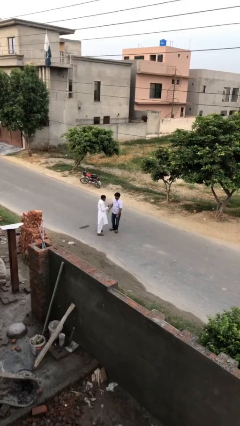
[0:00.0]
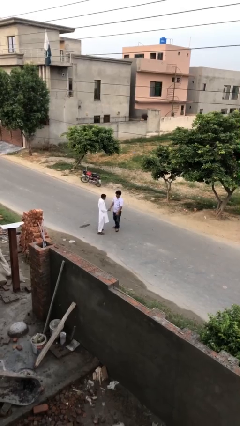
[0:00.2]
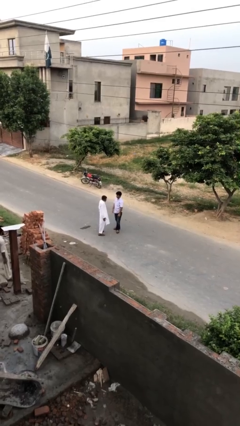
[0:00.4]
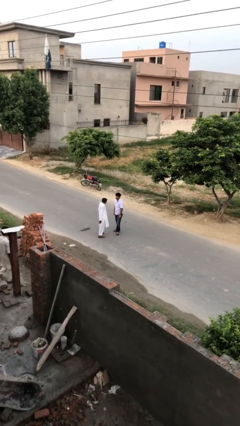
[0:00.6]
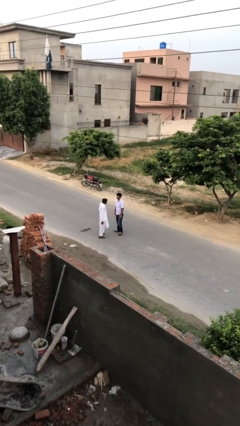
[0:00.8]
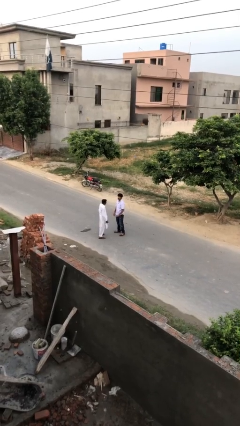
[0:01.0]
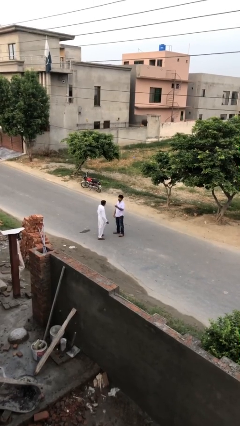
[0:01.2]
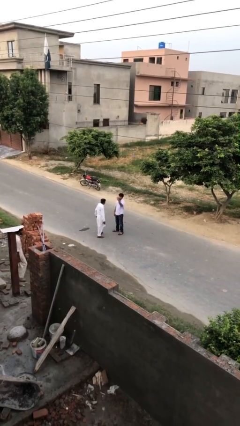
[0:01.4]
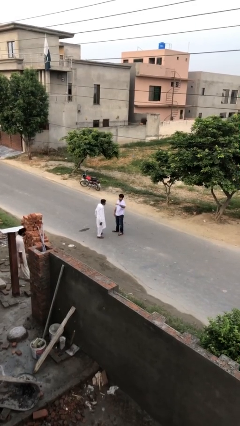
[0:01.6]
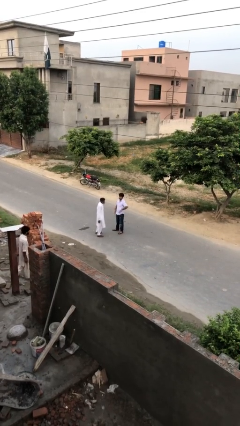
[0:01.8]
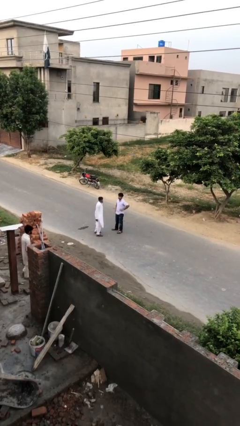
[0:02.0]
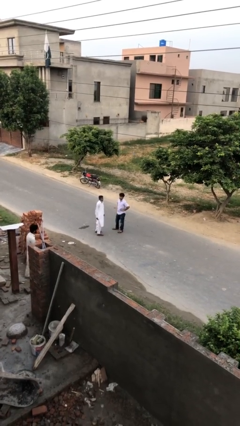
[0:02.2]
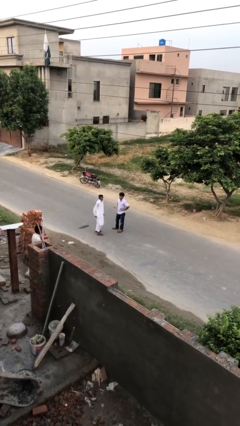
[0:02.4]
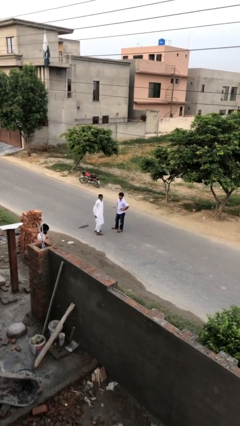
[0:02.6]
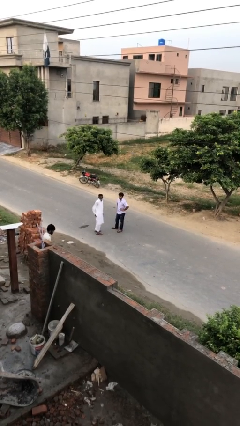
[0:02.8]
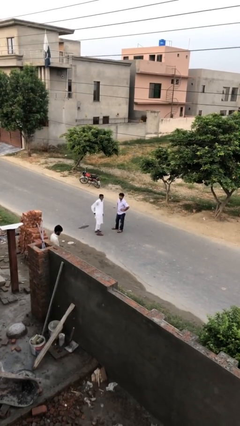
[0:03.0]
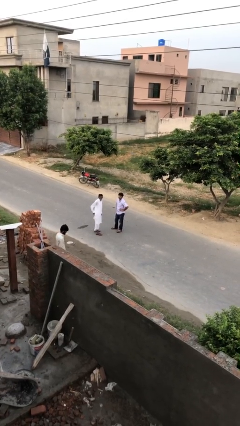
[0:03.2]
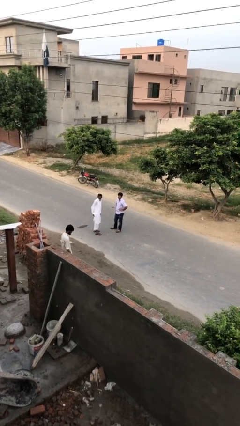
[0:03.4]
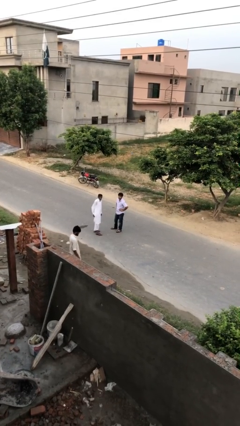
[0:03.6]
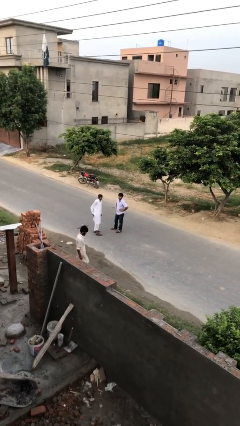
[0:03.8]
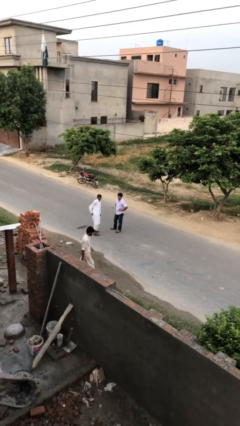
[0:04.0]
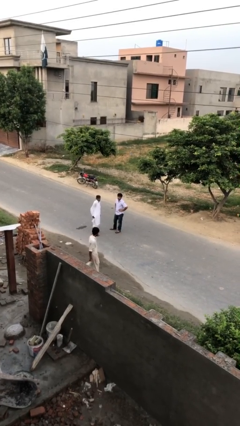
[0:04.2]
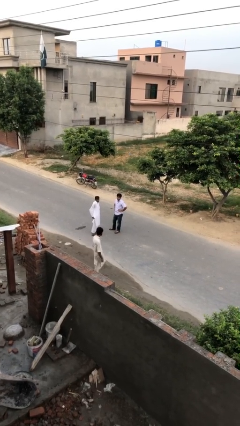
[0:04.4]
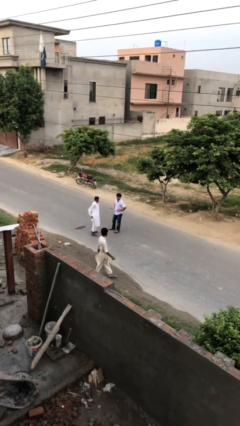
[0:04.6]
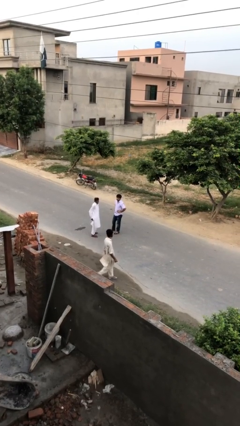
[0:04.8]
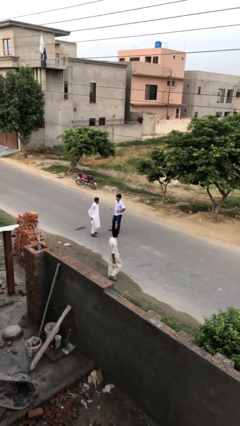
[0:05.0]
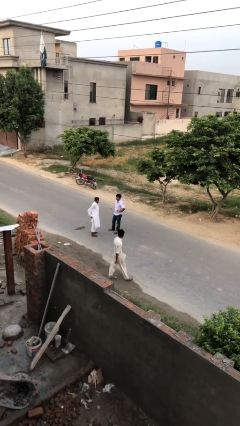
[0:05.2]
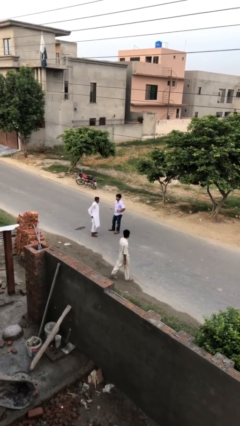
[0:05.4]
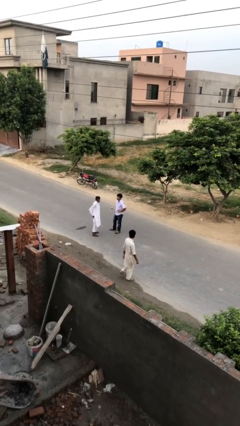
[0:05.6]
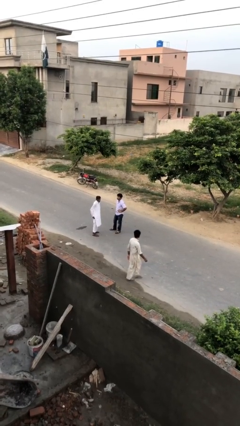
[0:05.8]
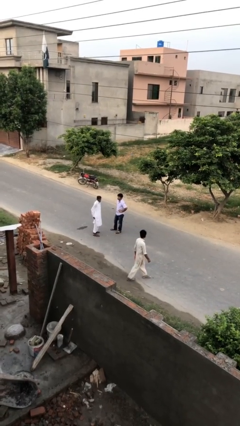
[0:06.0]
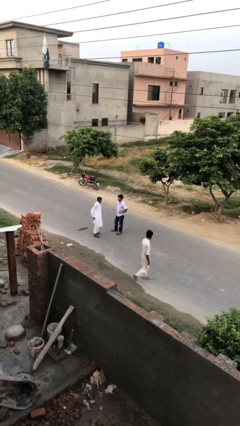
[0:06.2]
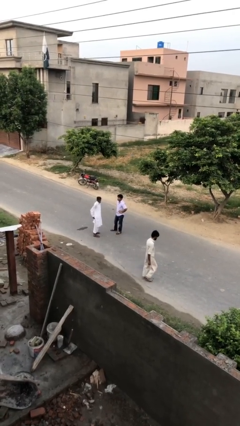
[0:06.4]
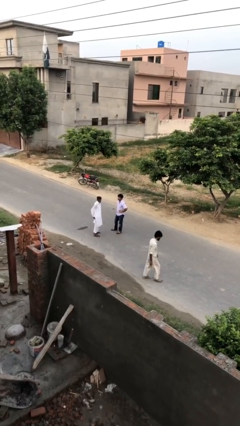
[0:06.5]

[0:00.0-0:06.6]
person talks to person

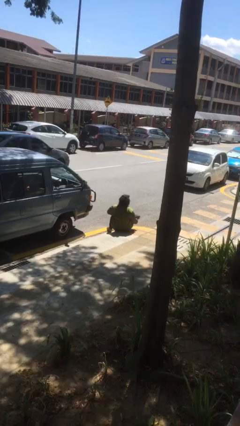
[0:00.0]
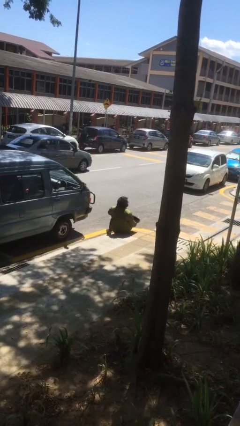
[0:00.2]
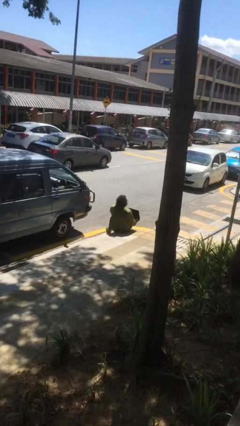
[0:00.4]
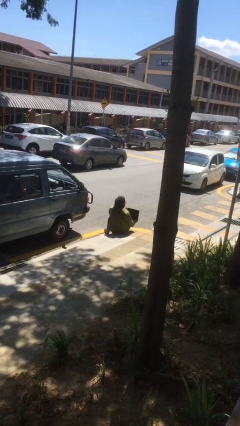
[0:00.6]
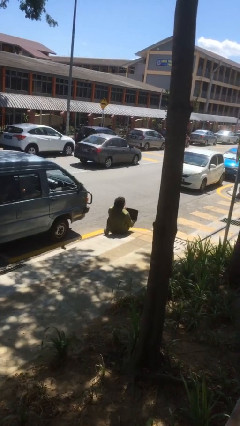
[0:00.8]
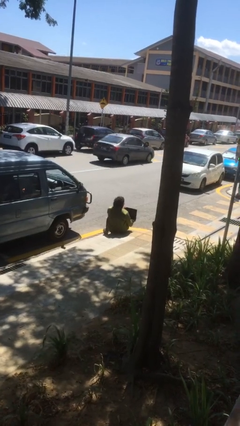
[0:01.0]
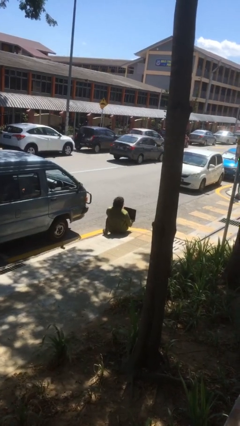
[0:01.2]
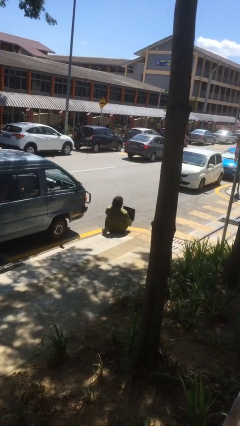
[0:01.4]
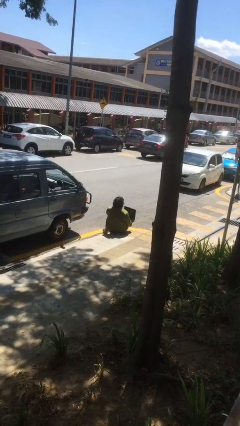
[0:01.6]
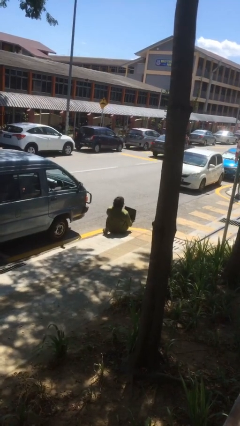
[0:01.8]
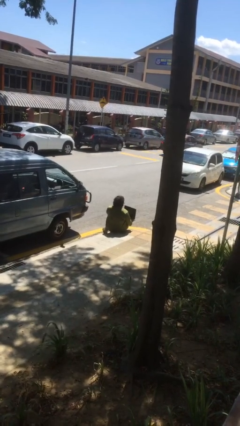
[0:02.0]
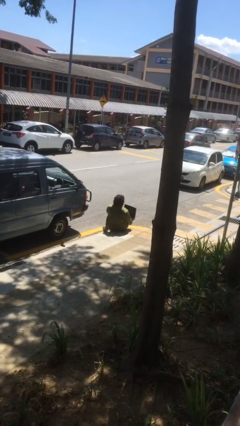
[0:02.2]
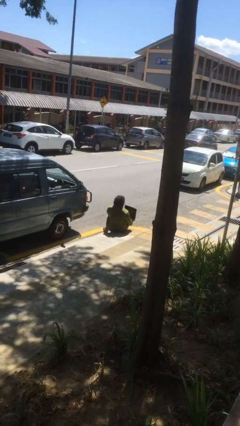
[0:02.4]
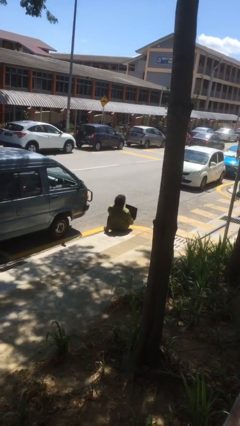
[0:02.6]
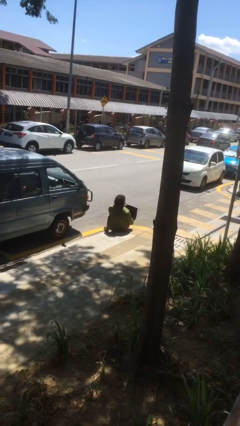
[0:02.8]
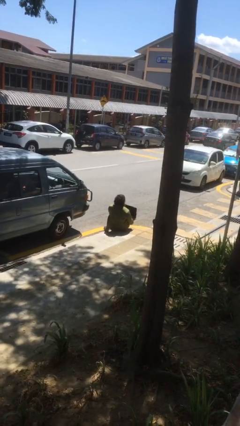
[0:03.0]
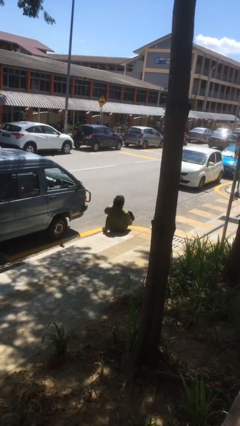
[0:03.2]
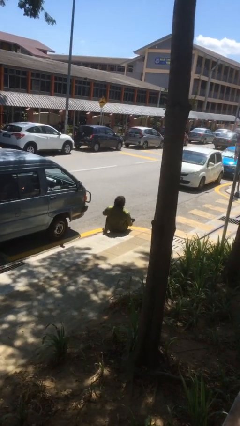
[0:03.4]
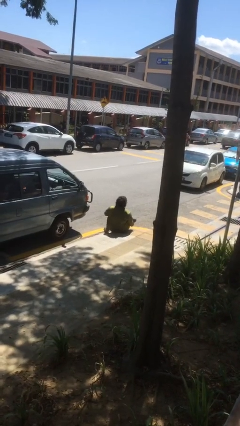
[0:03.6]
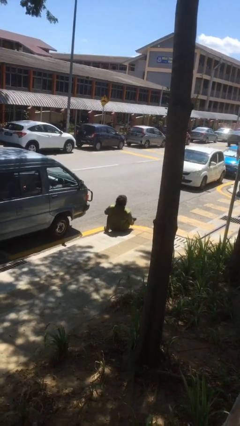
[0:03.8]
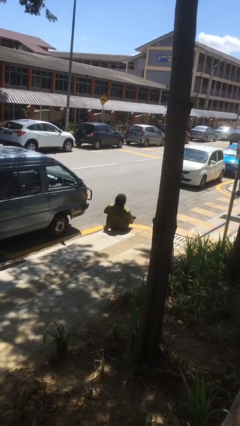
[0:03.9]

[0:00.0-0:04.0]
person interacts with laptop

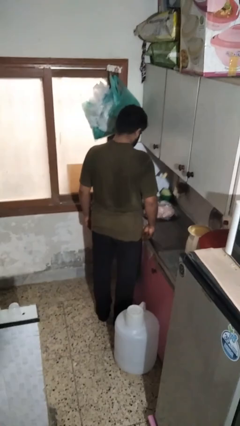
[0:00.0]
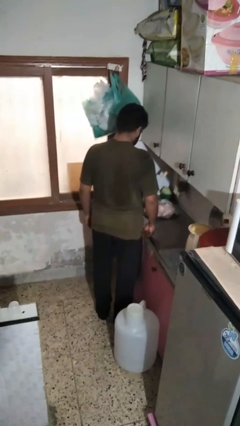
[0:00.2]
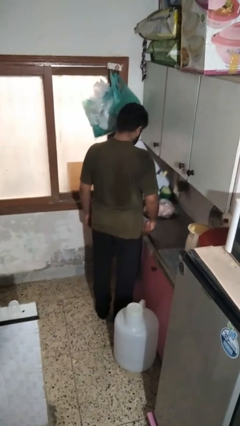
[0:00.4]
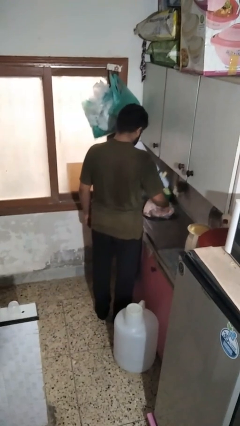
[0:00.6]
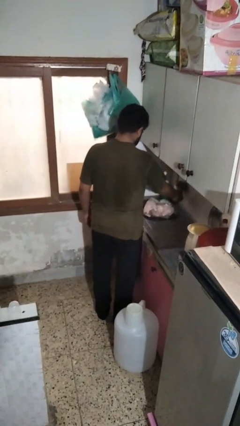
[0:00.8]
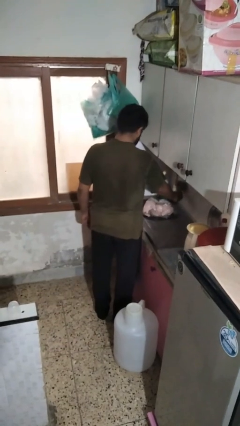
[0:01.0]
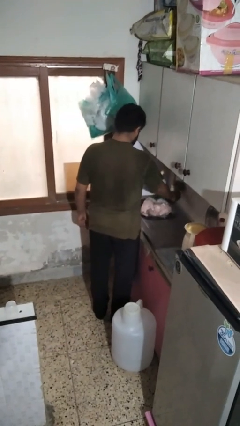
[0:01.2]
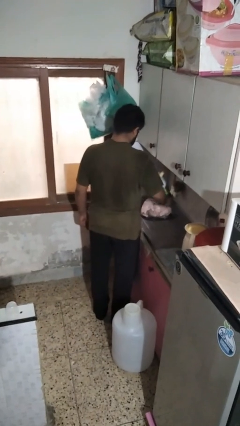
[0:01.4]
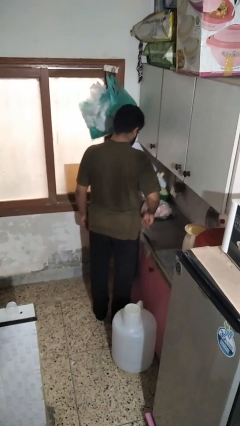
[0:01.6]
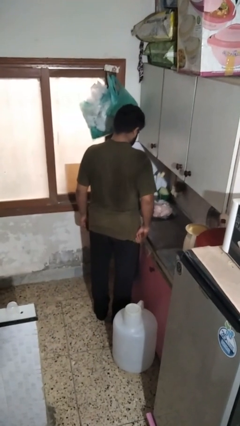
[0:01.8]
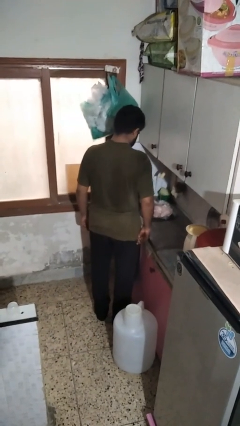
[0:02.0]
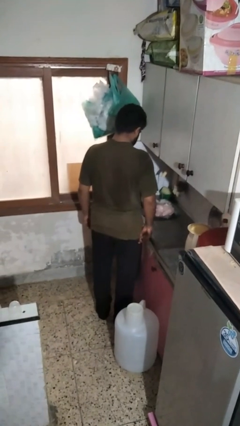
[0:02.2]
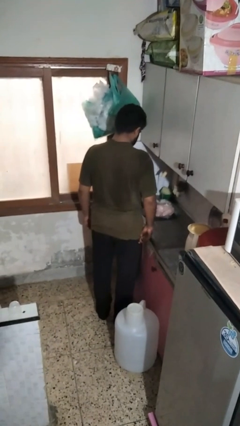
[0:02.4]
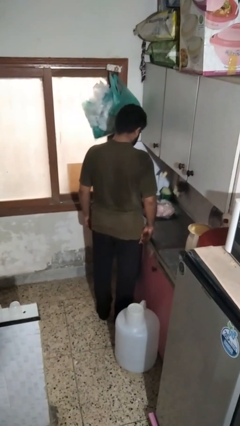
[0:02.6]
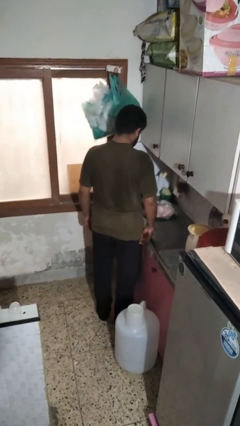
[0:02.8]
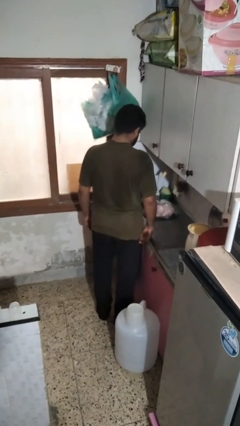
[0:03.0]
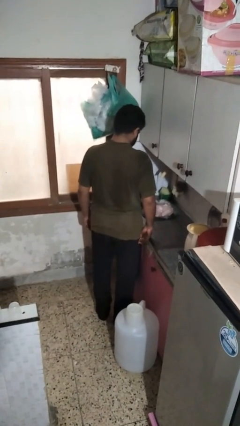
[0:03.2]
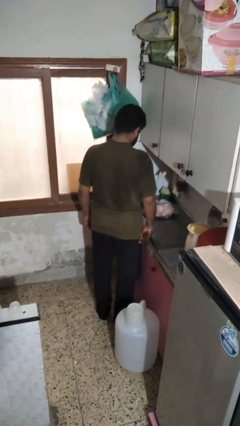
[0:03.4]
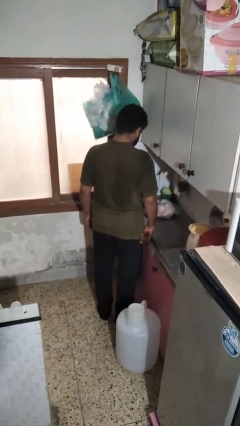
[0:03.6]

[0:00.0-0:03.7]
person turns on faucet

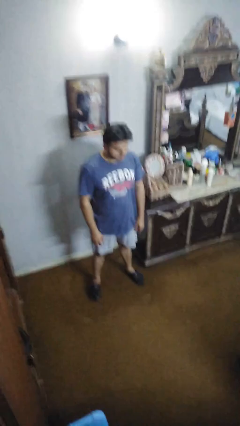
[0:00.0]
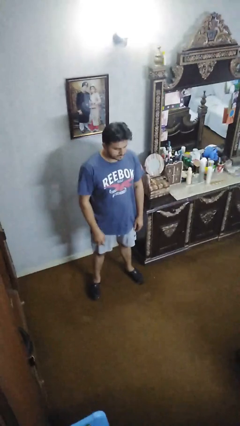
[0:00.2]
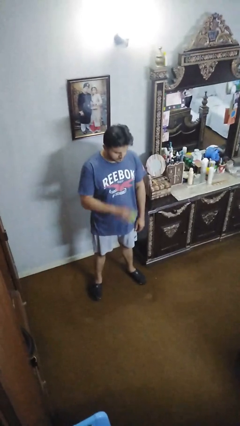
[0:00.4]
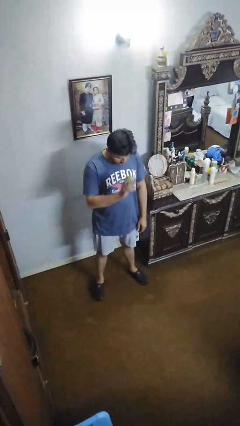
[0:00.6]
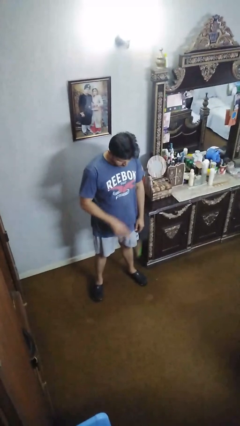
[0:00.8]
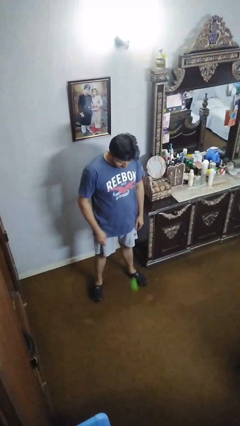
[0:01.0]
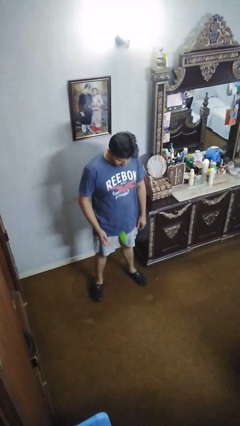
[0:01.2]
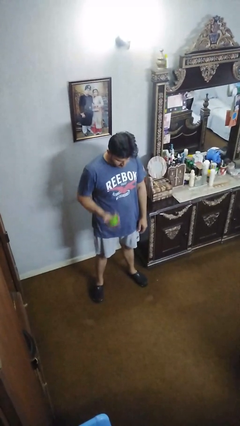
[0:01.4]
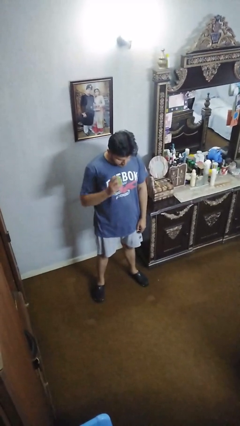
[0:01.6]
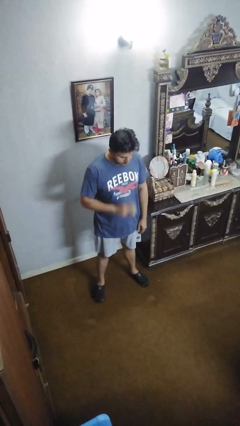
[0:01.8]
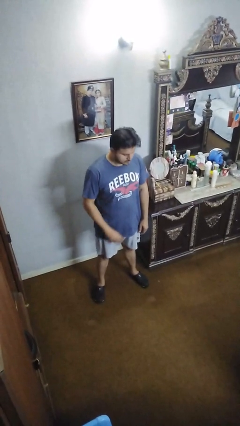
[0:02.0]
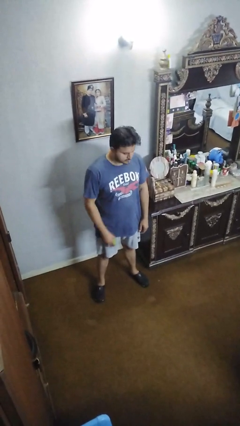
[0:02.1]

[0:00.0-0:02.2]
person bounces ball on floor

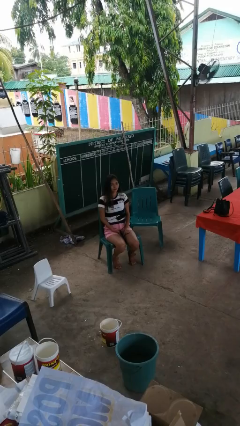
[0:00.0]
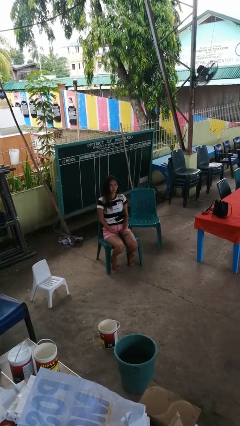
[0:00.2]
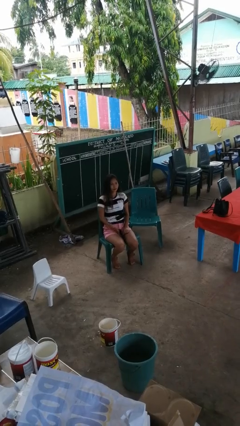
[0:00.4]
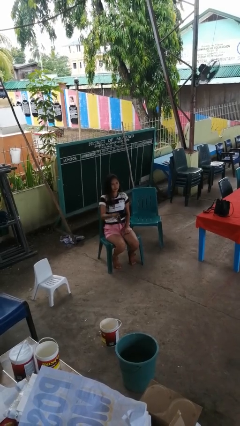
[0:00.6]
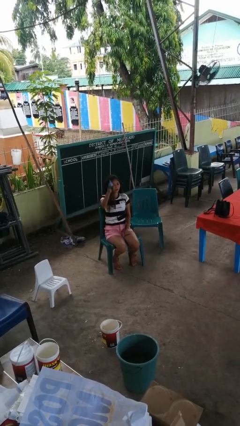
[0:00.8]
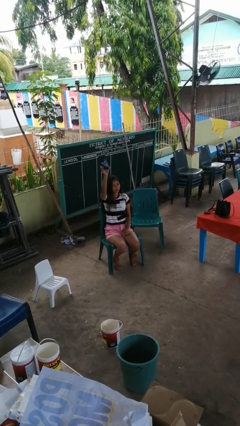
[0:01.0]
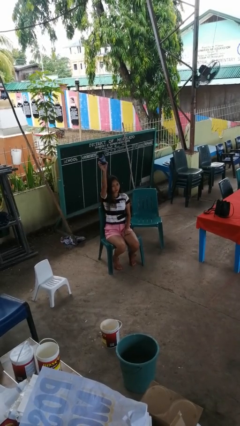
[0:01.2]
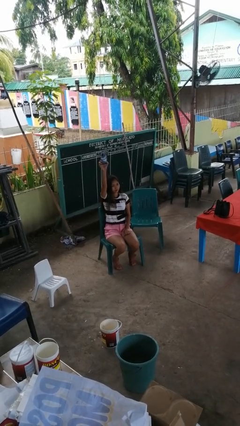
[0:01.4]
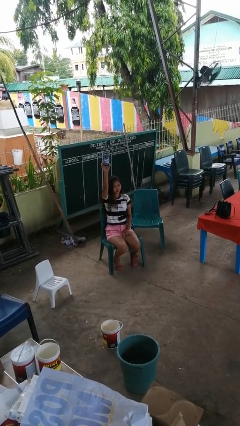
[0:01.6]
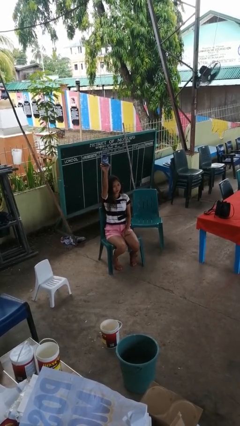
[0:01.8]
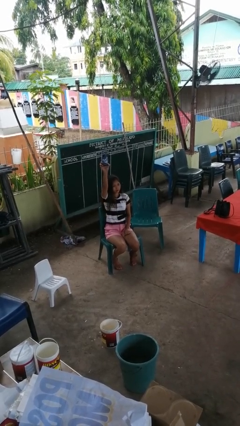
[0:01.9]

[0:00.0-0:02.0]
person holds object above head
